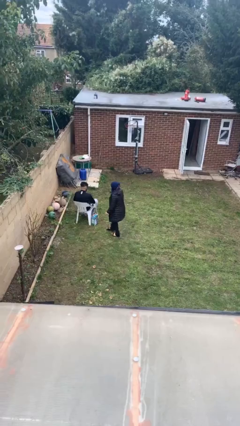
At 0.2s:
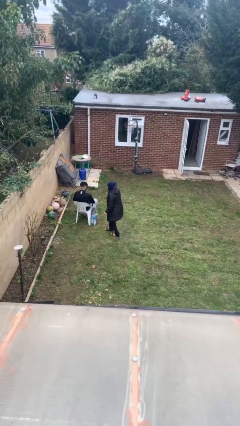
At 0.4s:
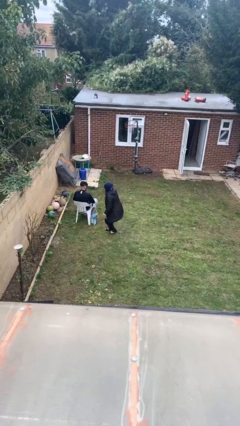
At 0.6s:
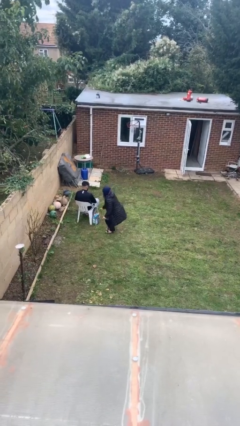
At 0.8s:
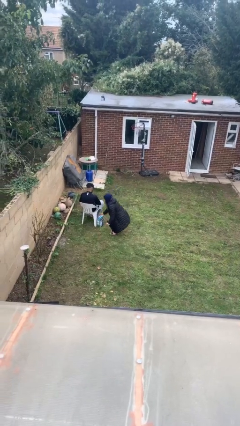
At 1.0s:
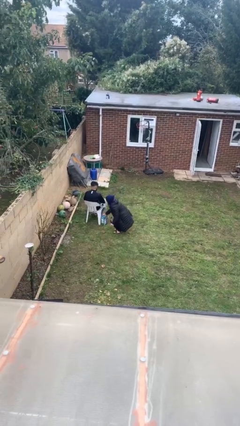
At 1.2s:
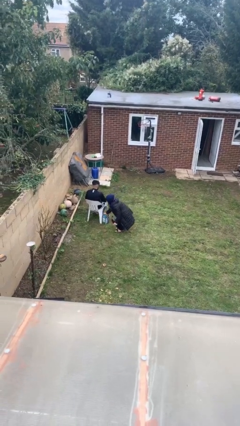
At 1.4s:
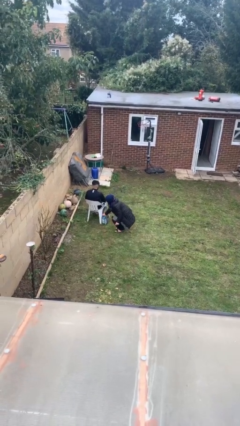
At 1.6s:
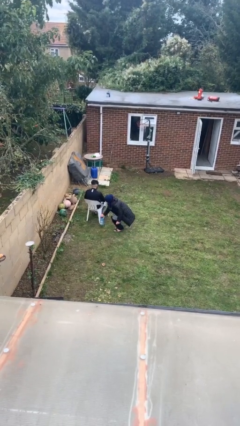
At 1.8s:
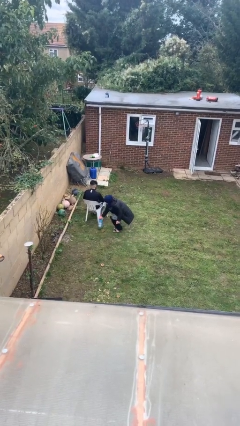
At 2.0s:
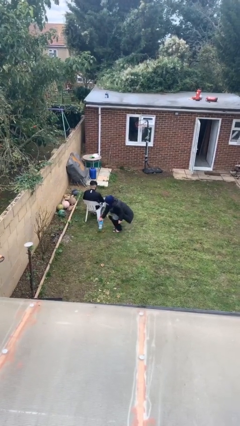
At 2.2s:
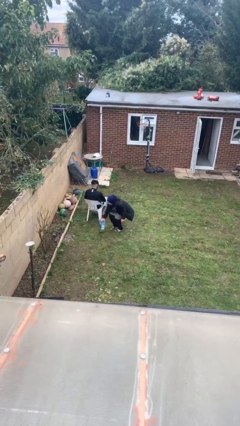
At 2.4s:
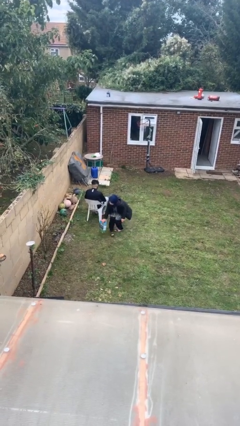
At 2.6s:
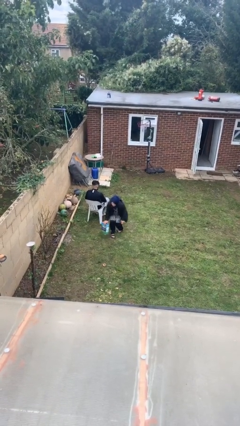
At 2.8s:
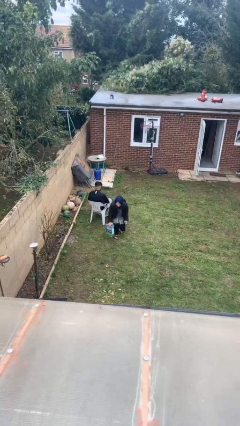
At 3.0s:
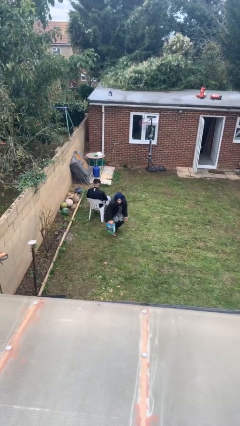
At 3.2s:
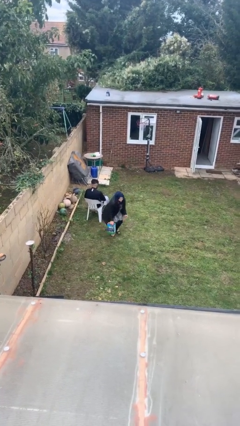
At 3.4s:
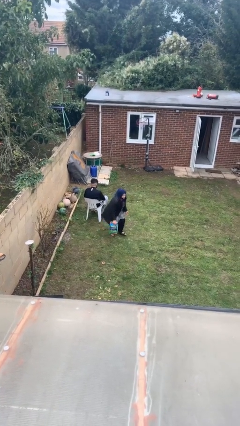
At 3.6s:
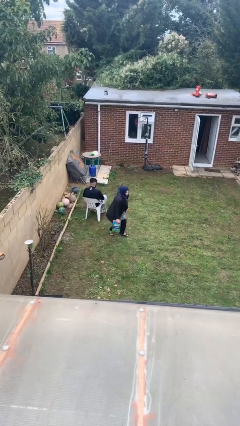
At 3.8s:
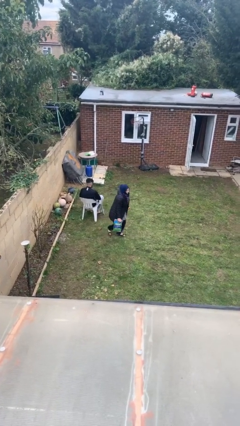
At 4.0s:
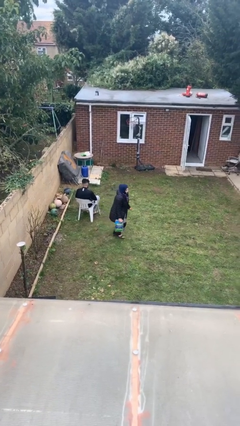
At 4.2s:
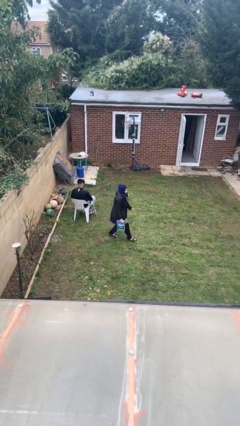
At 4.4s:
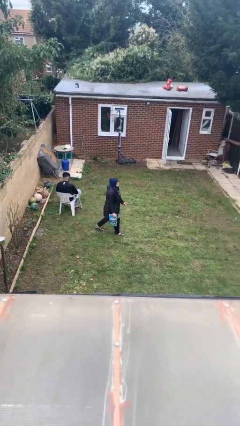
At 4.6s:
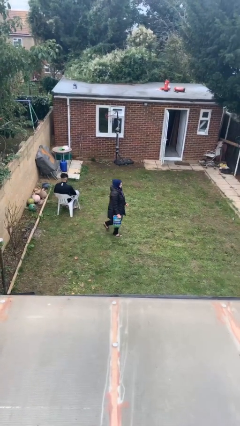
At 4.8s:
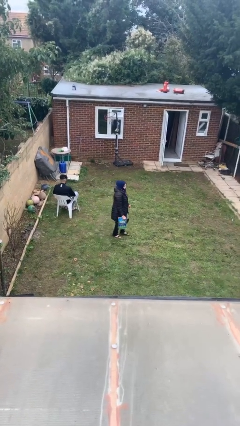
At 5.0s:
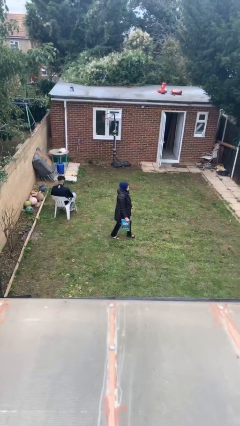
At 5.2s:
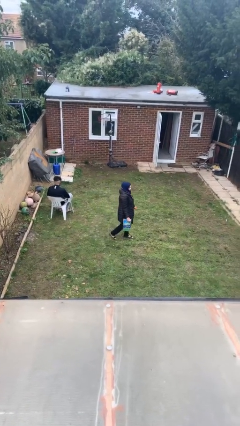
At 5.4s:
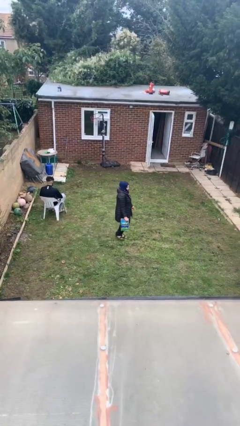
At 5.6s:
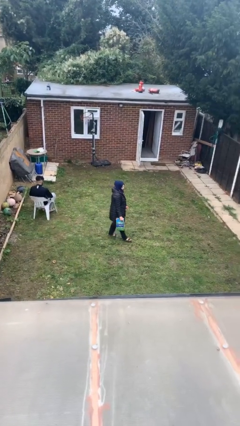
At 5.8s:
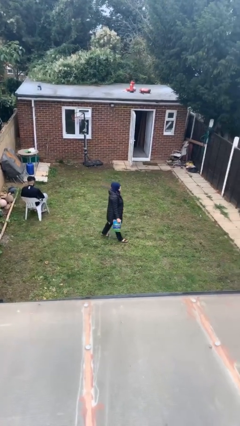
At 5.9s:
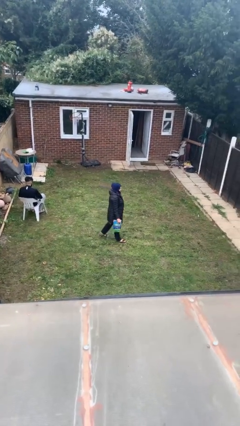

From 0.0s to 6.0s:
person steals object from person

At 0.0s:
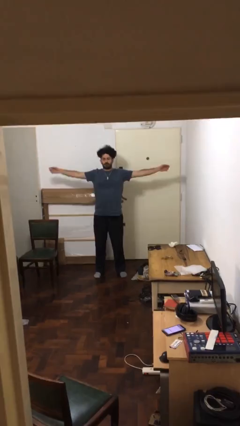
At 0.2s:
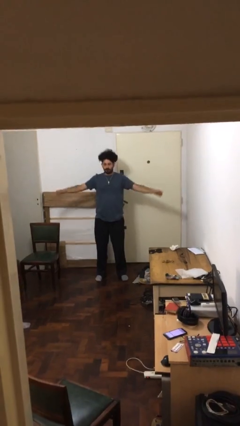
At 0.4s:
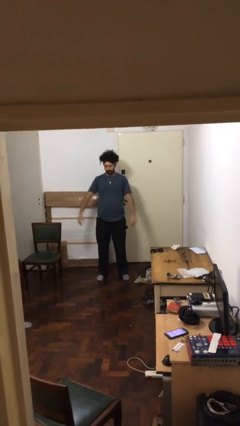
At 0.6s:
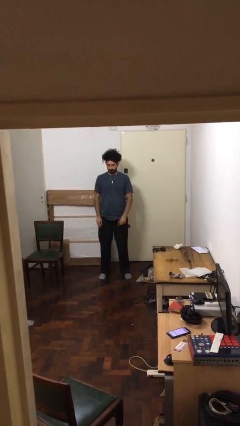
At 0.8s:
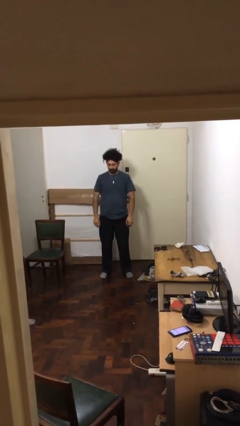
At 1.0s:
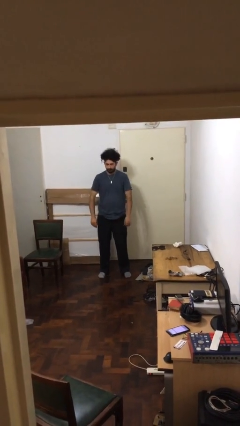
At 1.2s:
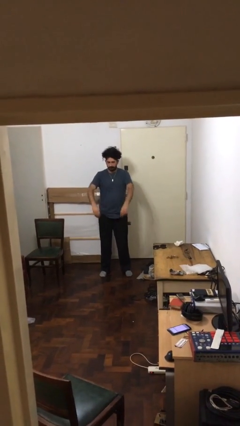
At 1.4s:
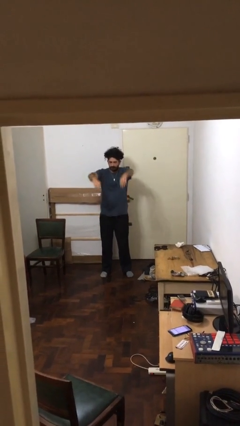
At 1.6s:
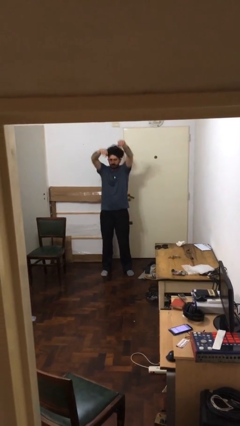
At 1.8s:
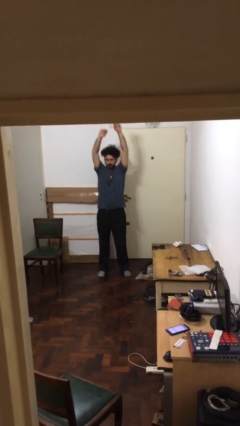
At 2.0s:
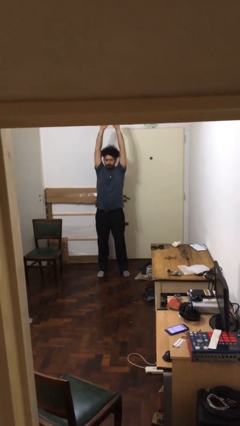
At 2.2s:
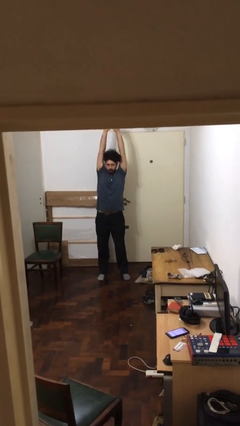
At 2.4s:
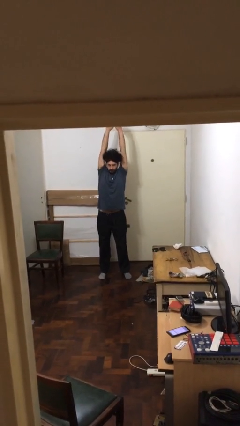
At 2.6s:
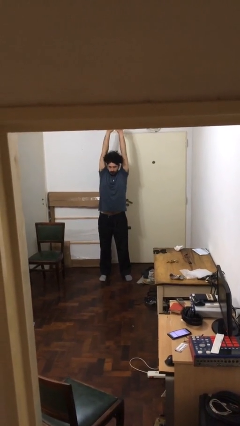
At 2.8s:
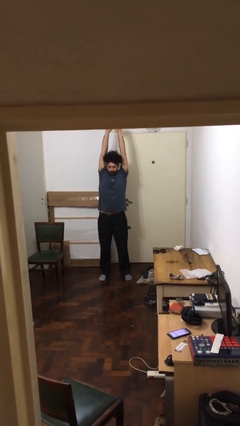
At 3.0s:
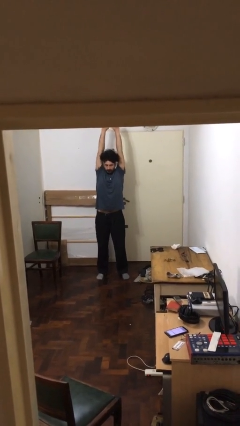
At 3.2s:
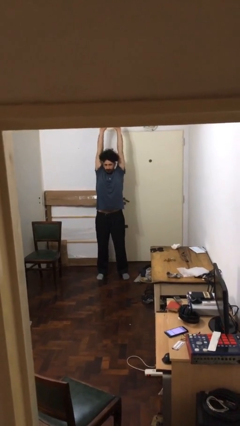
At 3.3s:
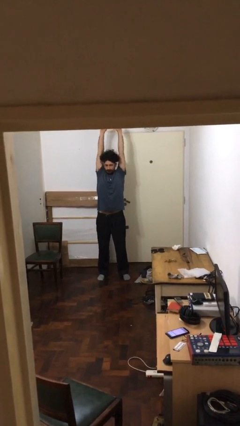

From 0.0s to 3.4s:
person stretches arms over head

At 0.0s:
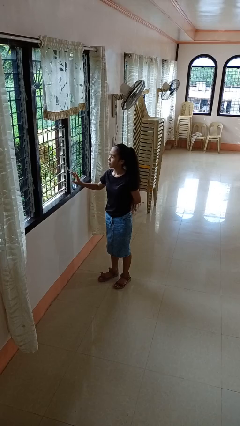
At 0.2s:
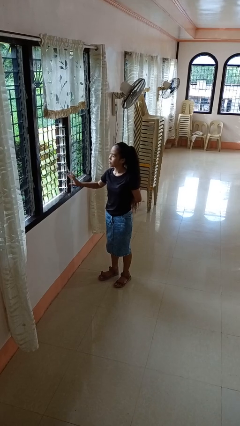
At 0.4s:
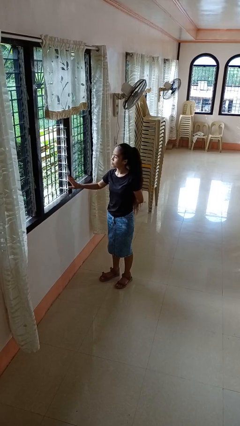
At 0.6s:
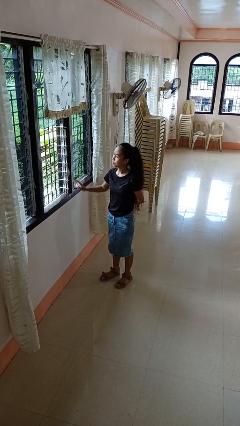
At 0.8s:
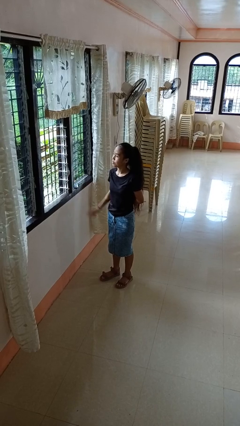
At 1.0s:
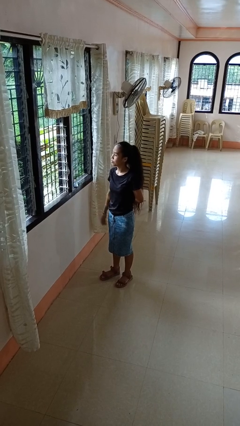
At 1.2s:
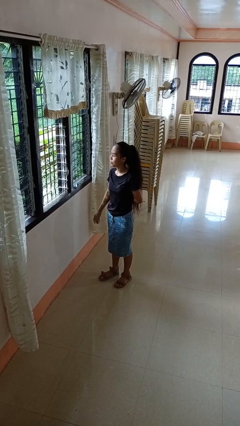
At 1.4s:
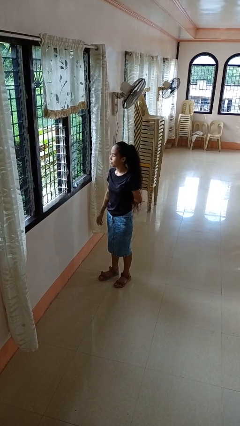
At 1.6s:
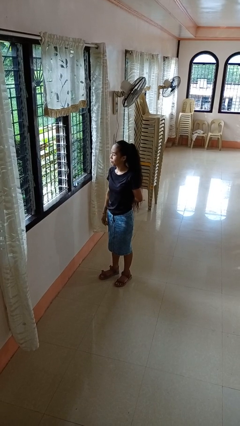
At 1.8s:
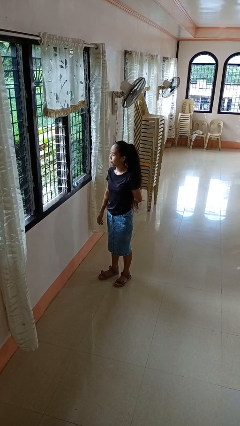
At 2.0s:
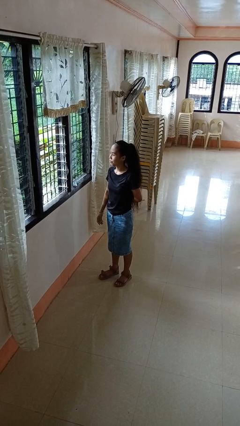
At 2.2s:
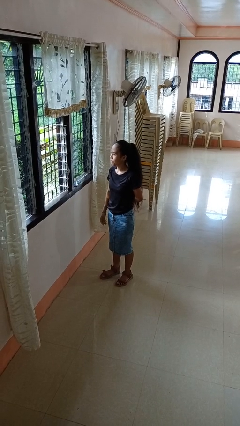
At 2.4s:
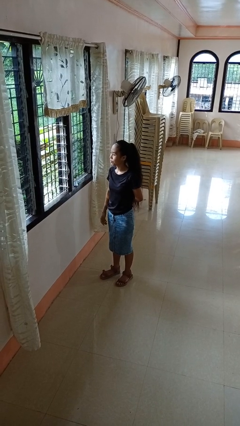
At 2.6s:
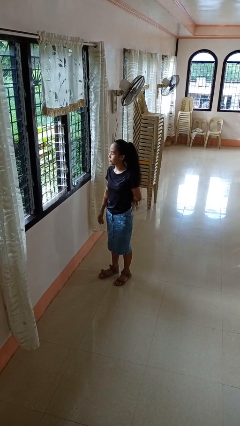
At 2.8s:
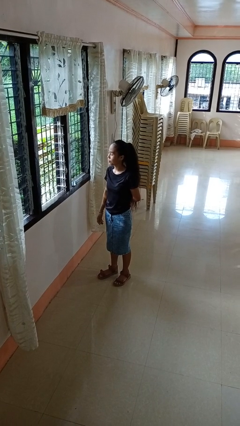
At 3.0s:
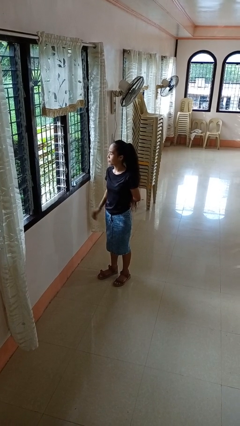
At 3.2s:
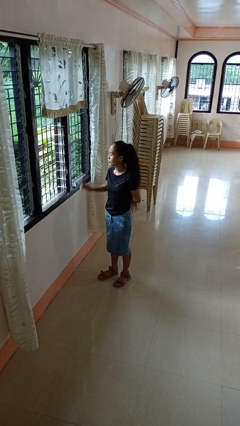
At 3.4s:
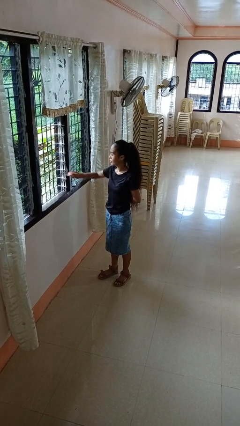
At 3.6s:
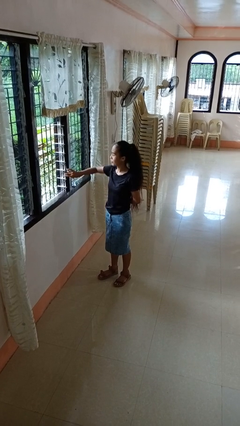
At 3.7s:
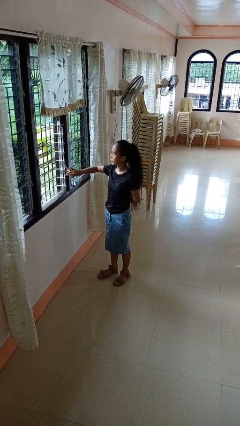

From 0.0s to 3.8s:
person opens home window

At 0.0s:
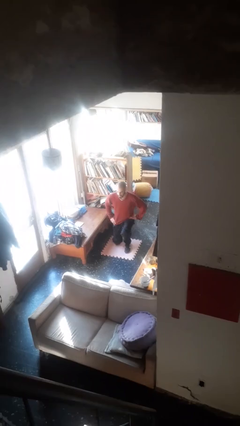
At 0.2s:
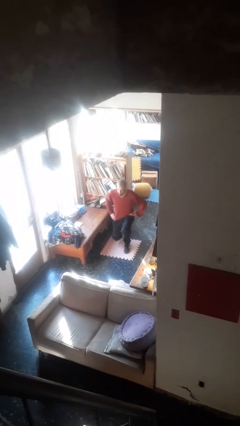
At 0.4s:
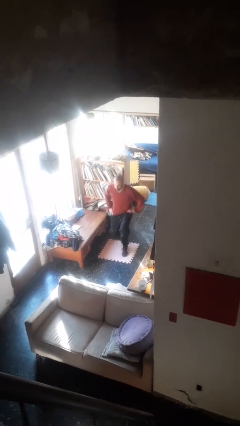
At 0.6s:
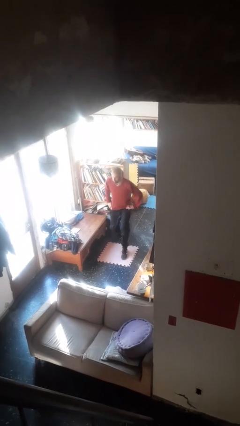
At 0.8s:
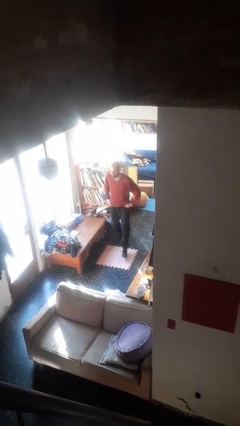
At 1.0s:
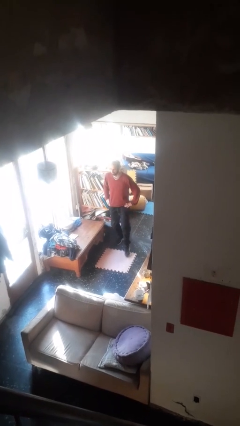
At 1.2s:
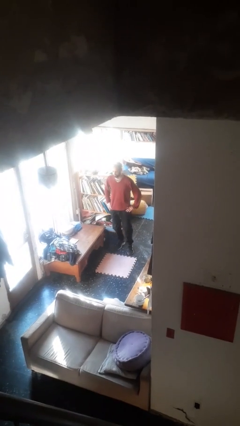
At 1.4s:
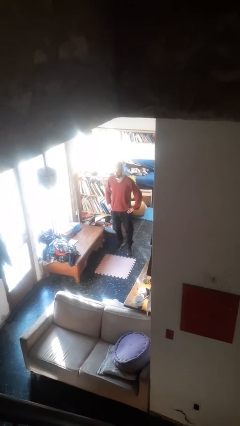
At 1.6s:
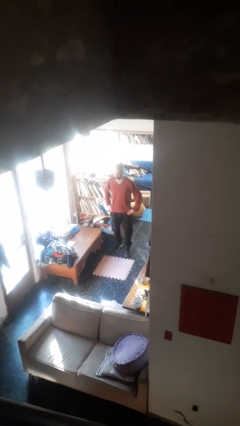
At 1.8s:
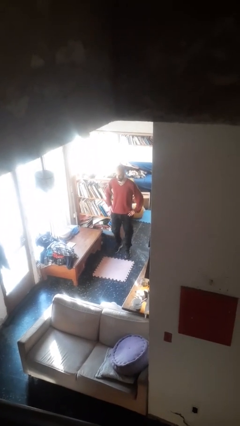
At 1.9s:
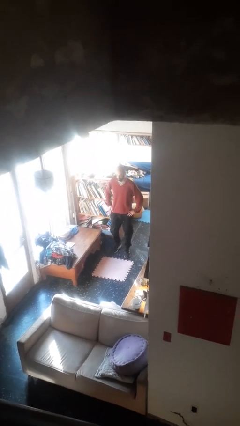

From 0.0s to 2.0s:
person stands up from floor

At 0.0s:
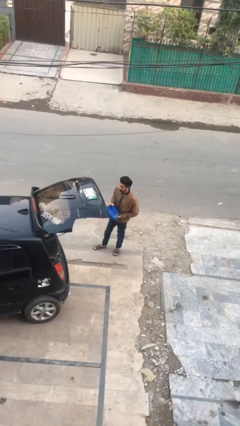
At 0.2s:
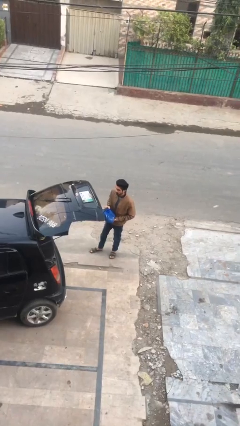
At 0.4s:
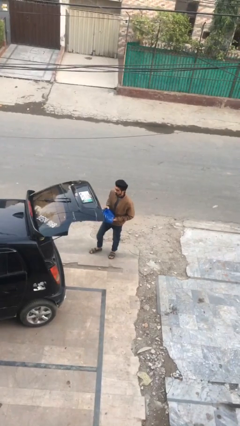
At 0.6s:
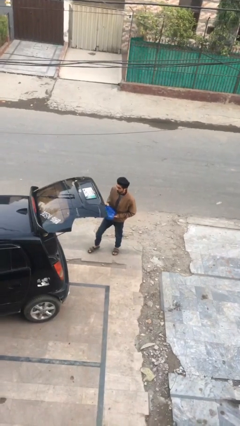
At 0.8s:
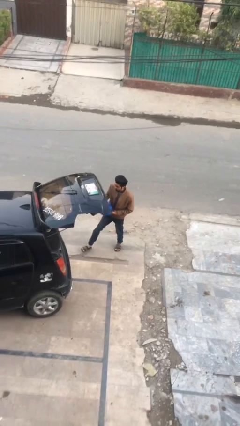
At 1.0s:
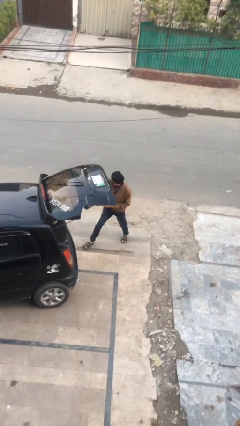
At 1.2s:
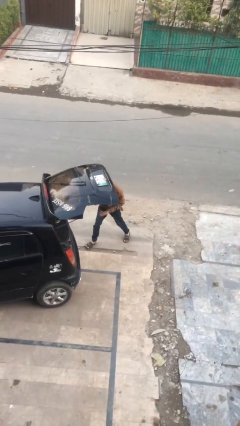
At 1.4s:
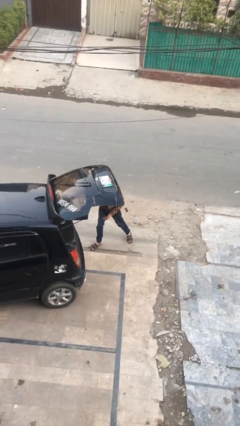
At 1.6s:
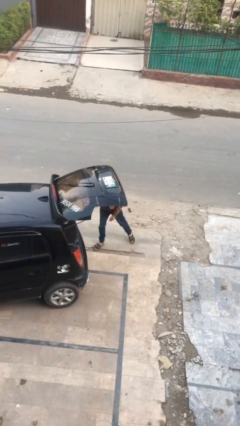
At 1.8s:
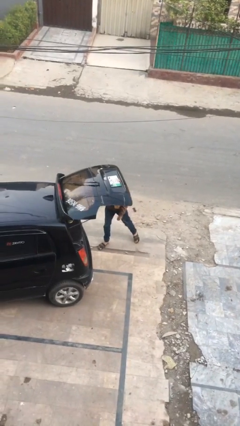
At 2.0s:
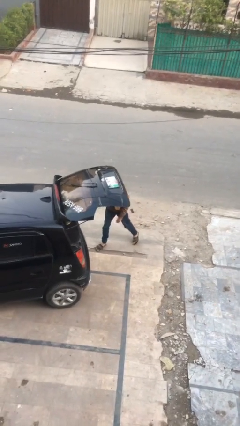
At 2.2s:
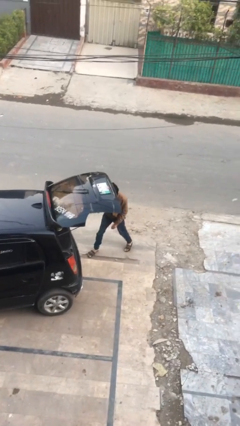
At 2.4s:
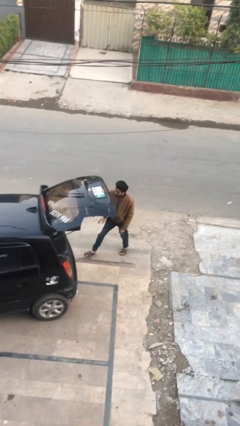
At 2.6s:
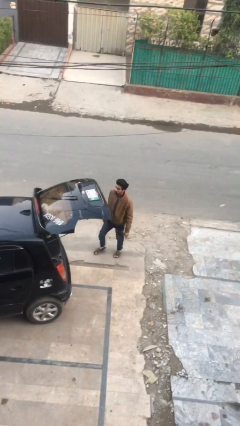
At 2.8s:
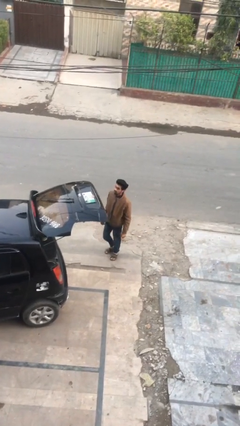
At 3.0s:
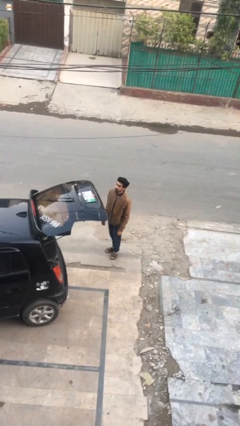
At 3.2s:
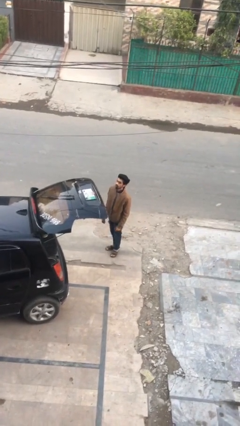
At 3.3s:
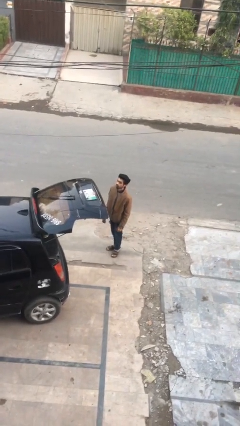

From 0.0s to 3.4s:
person loads car
